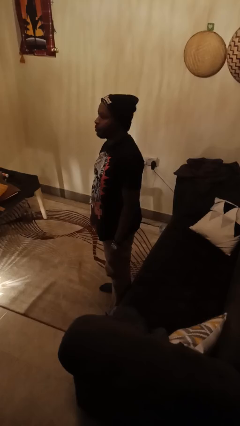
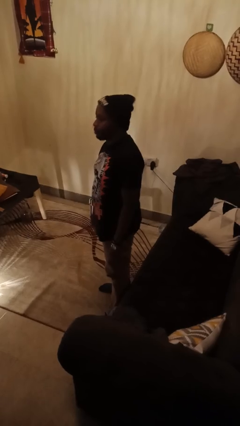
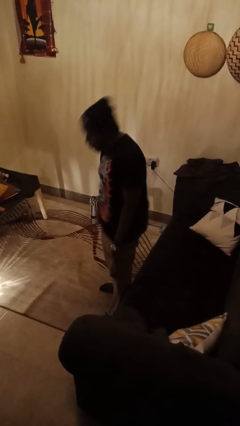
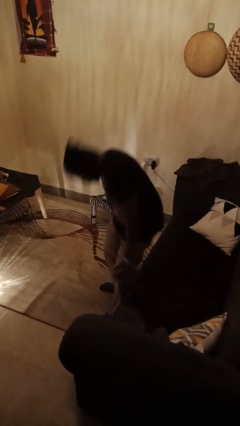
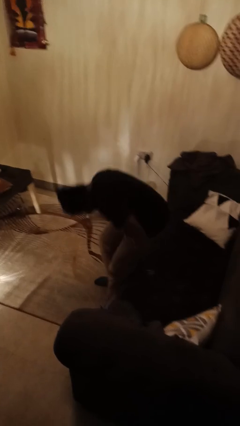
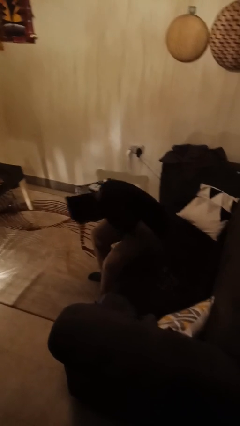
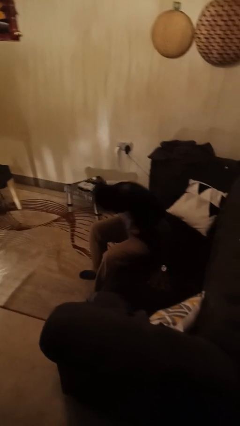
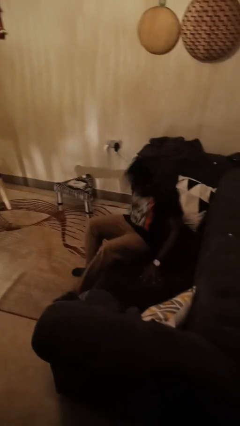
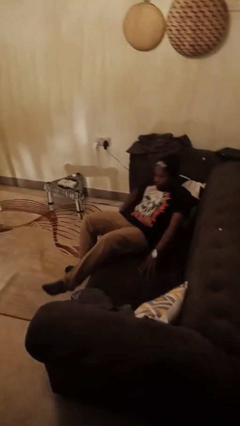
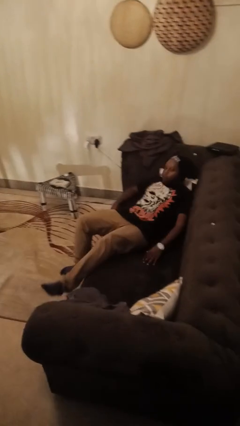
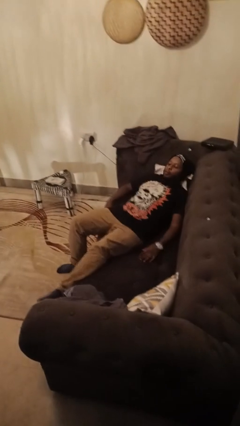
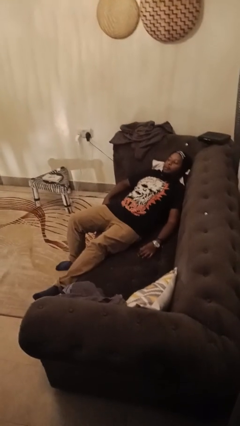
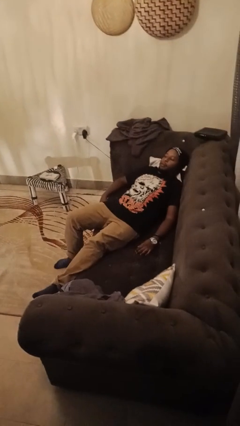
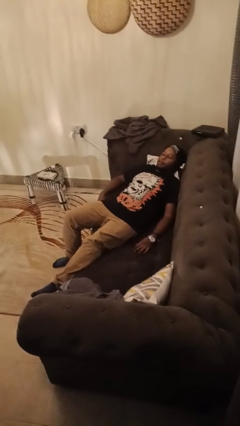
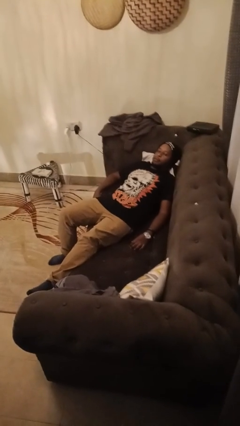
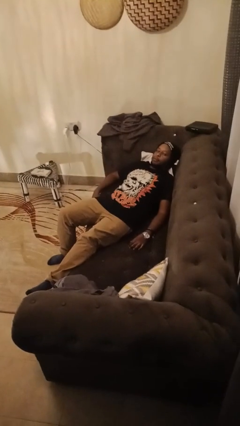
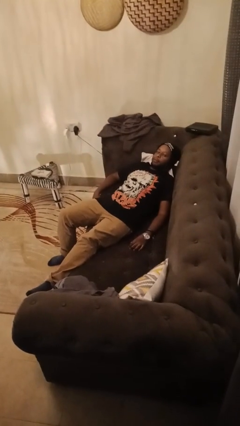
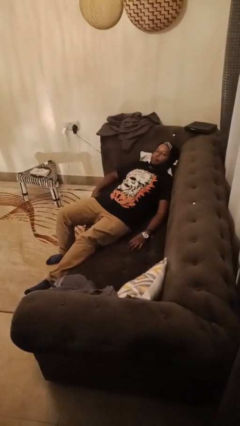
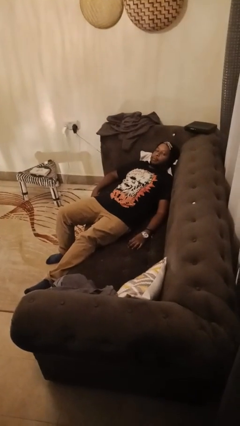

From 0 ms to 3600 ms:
person lies down on couch

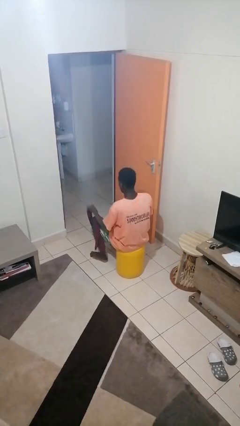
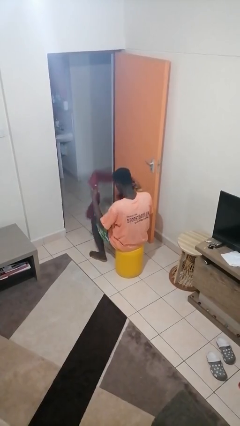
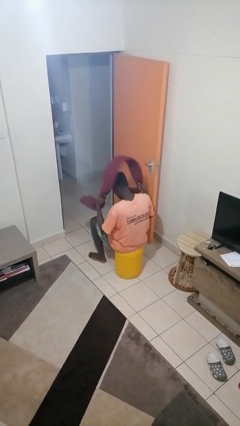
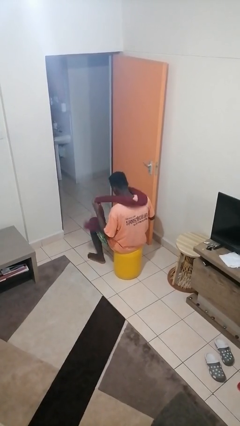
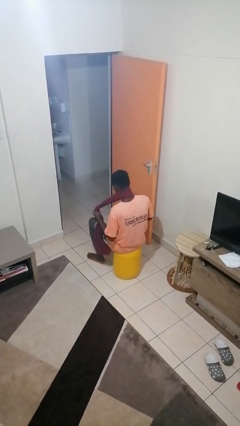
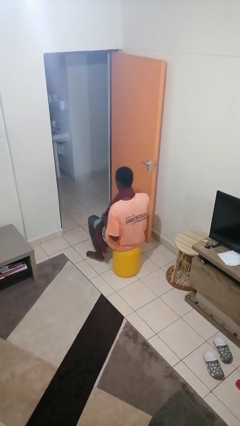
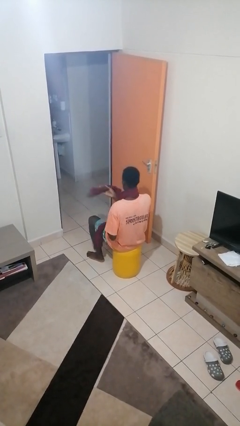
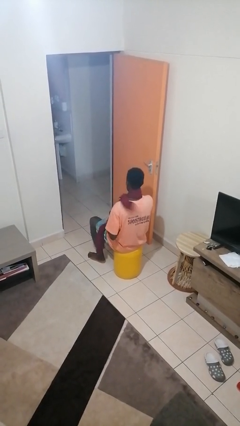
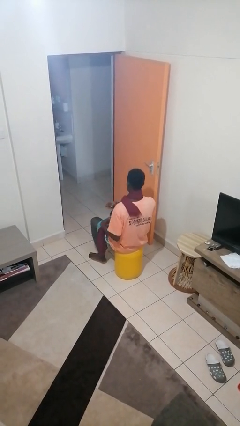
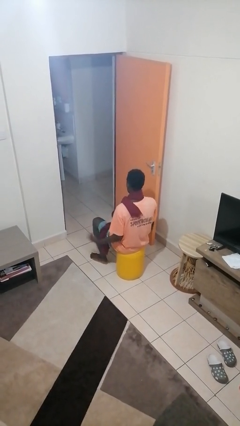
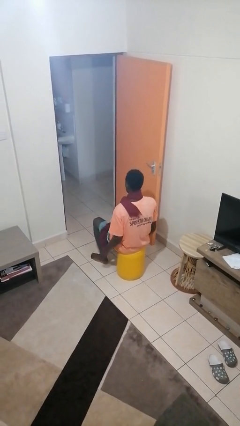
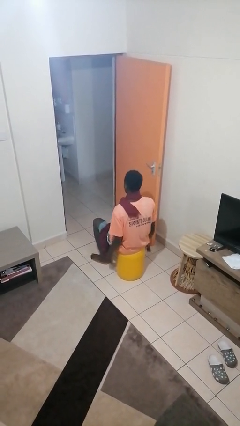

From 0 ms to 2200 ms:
person puts on scarf

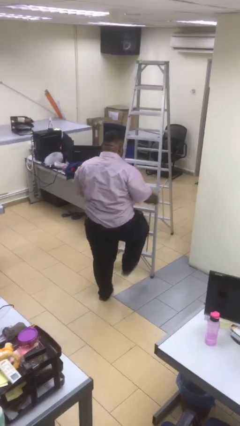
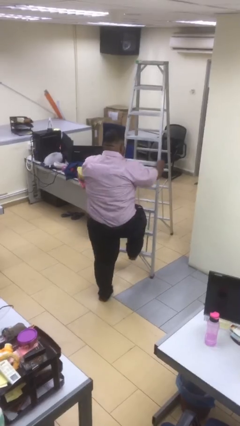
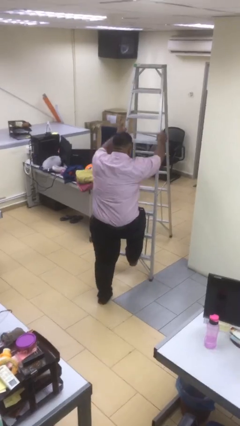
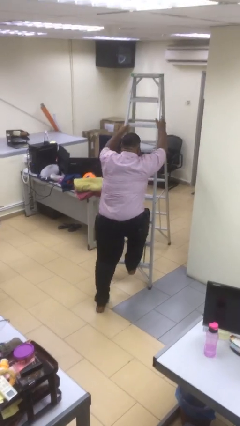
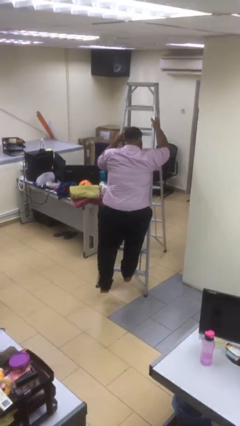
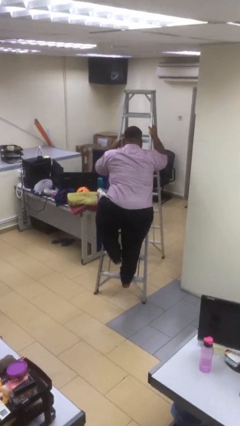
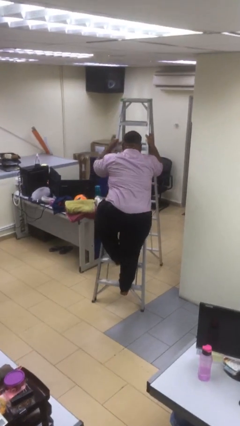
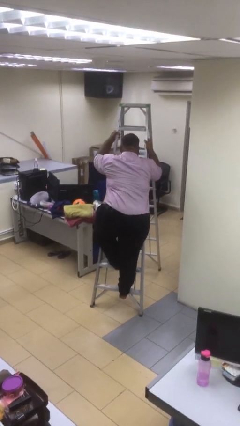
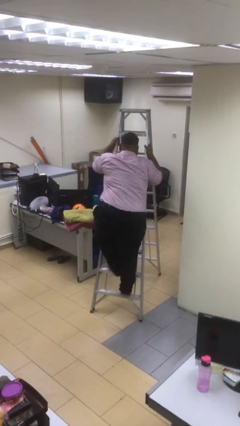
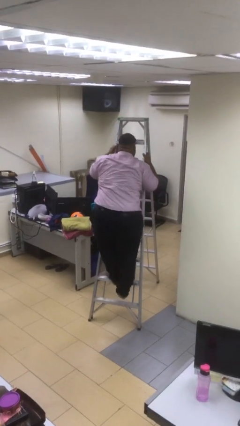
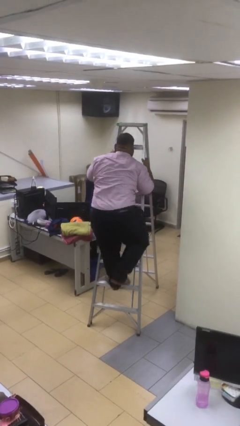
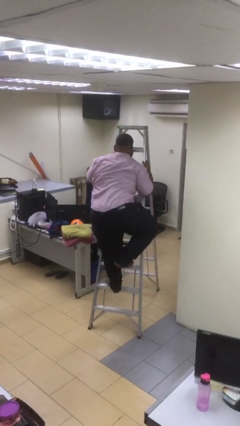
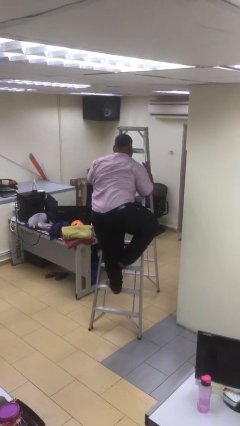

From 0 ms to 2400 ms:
person climbs up ladder

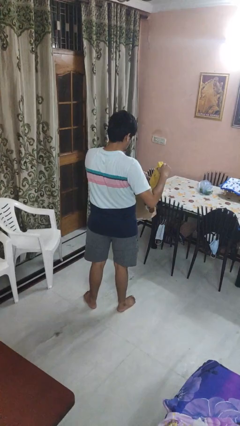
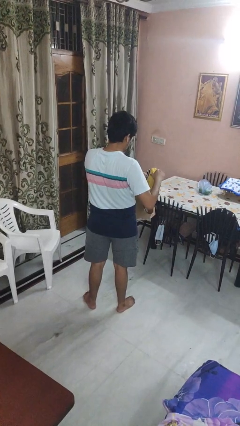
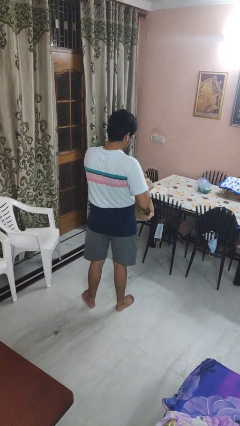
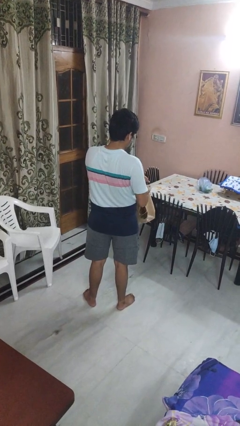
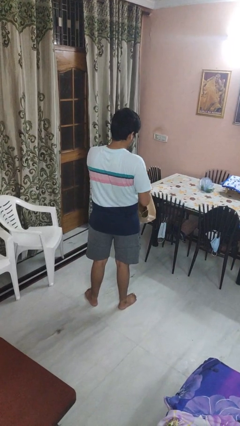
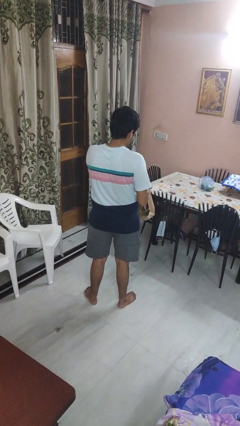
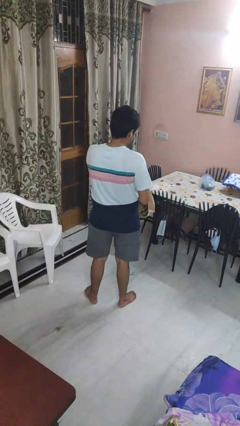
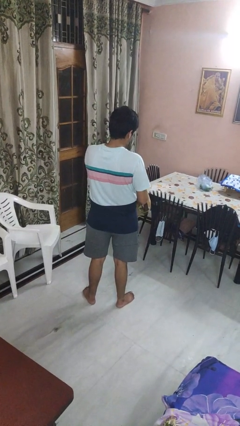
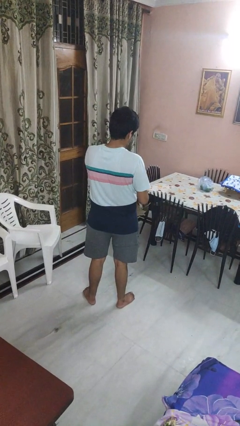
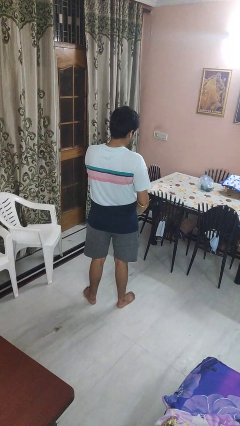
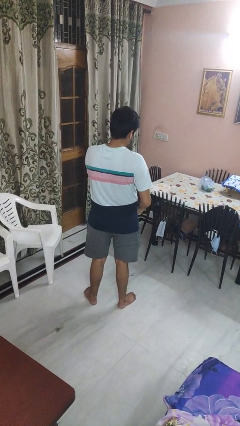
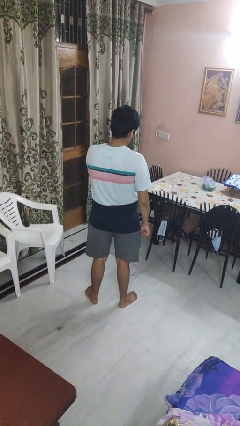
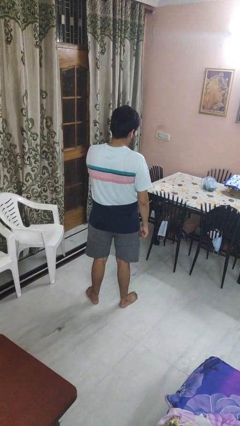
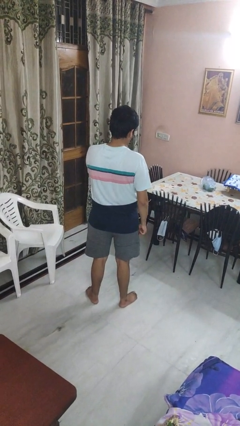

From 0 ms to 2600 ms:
person puts object into bag

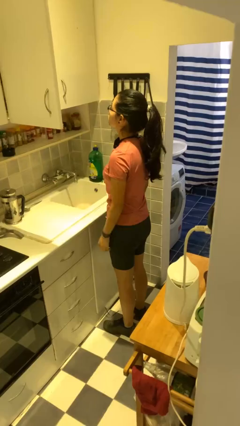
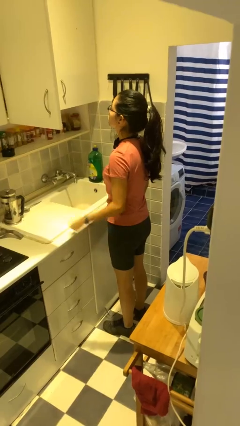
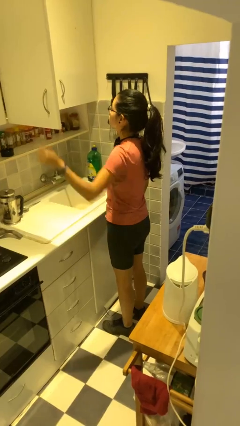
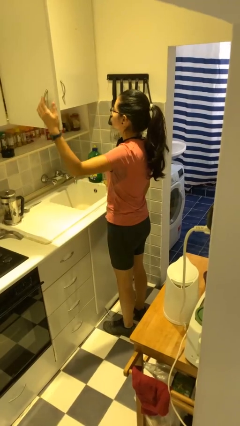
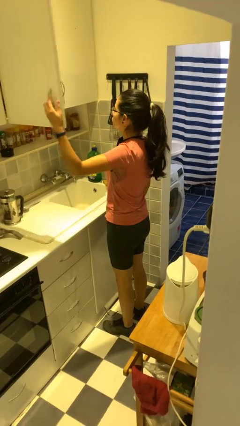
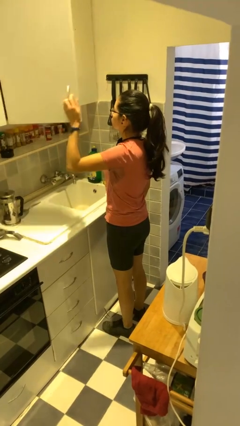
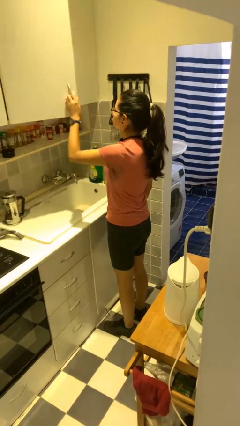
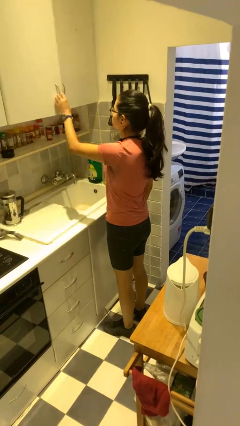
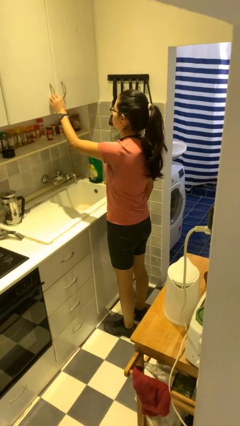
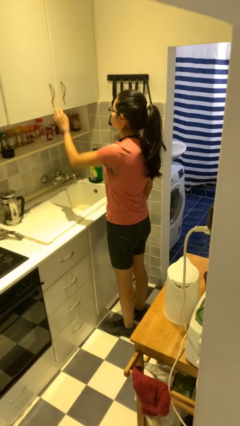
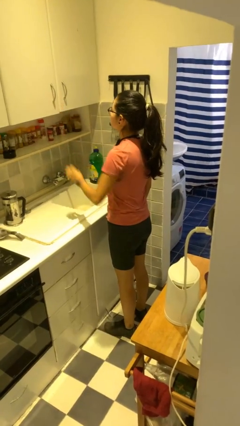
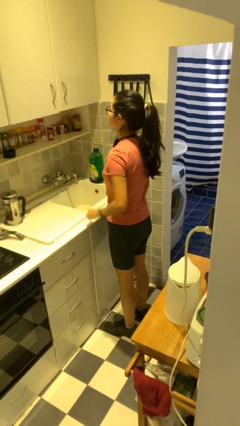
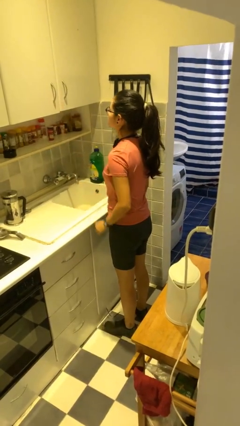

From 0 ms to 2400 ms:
person closes cabinet

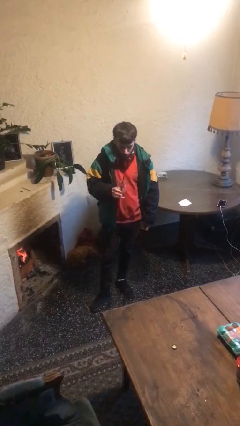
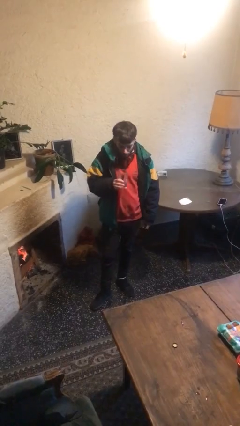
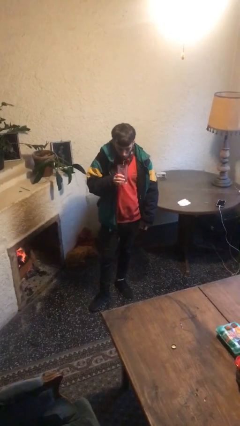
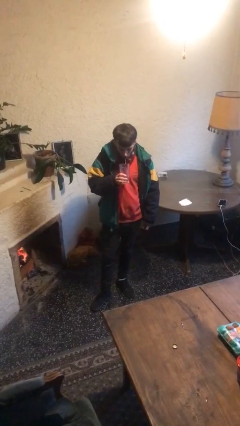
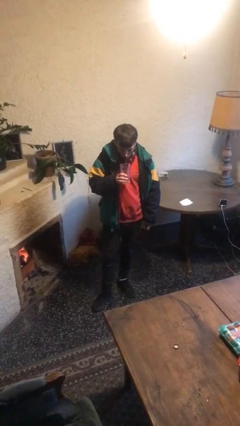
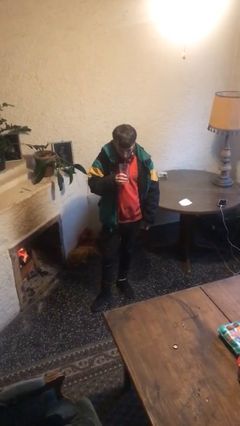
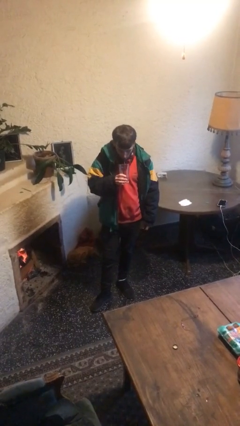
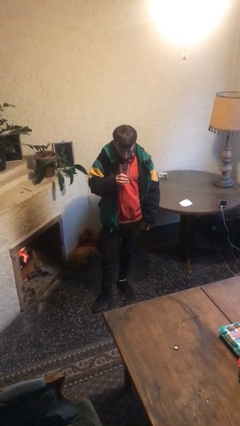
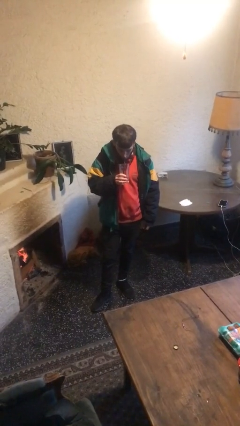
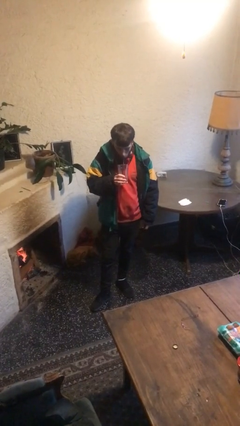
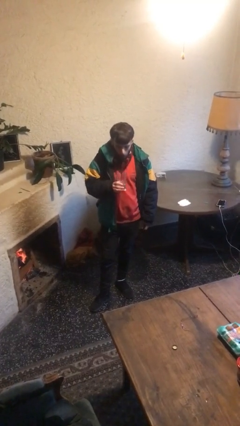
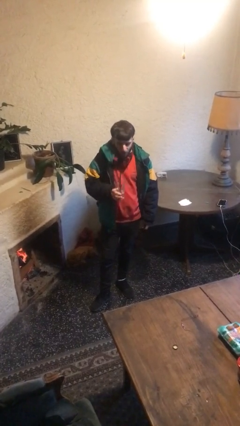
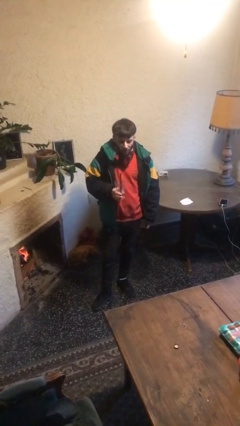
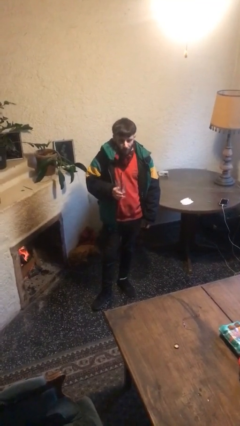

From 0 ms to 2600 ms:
person drinks from straw

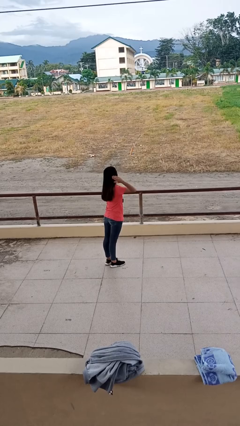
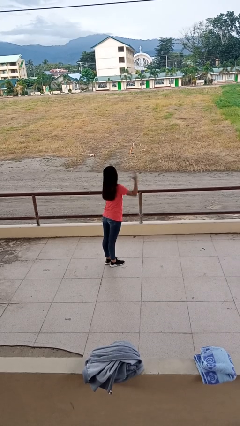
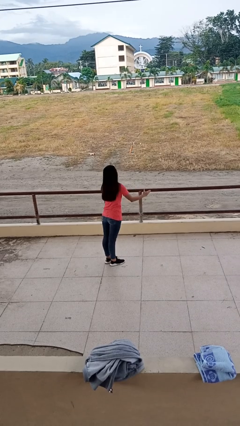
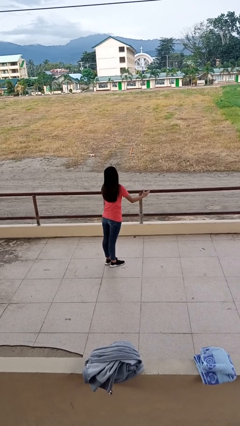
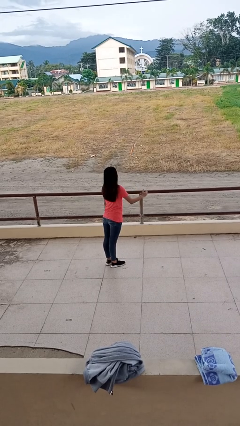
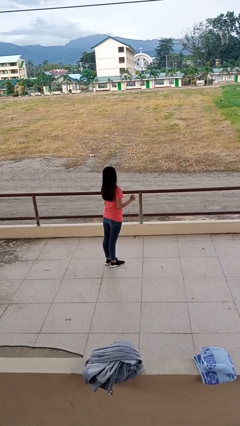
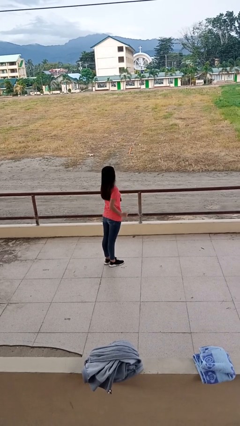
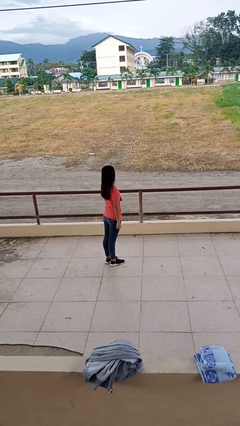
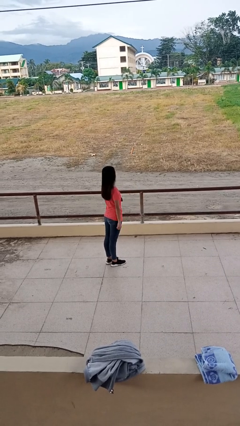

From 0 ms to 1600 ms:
person karate chop

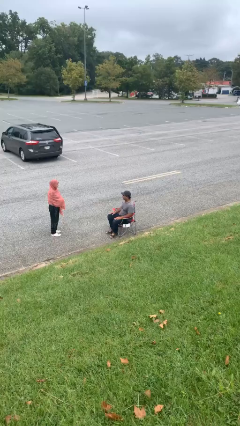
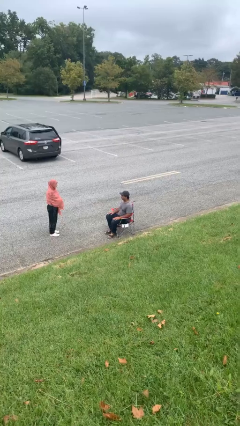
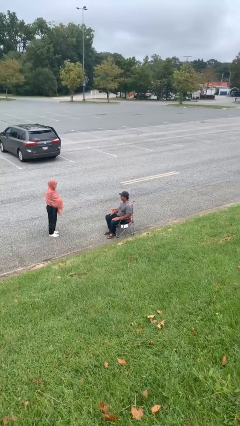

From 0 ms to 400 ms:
person shakes hand
